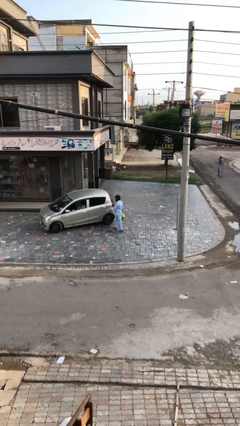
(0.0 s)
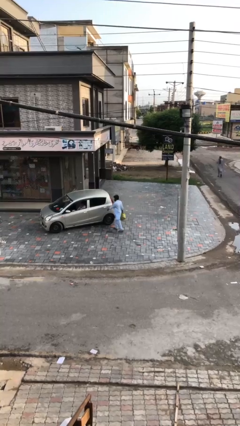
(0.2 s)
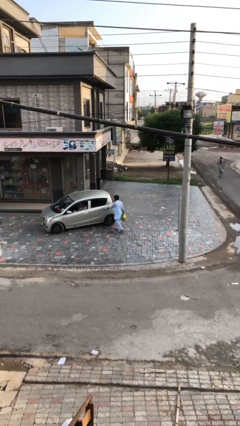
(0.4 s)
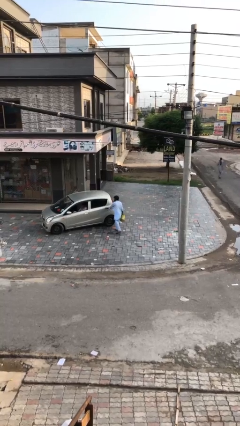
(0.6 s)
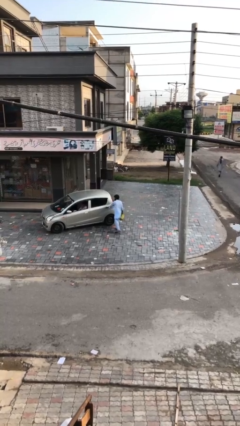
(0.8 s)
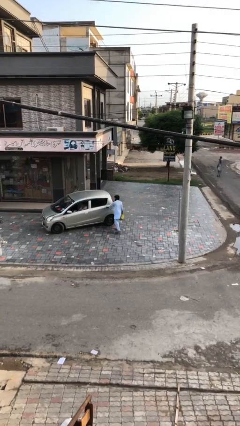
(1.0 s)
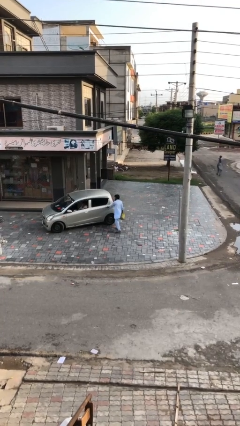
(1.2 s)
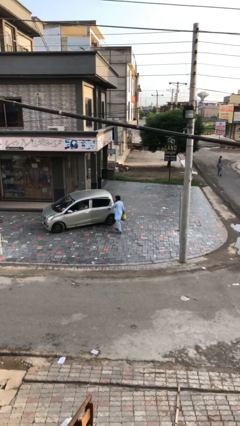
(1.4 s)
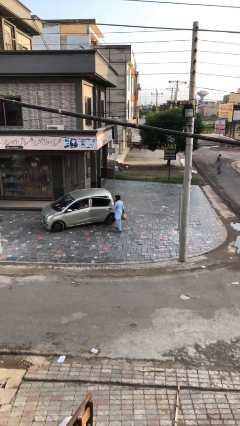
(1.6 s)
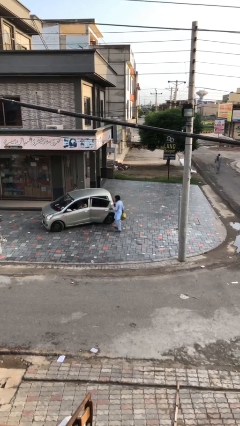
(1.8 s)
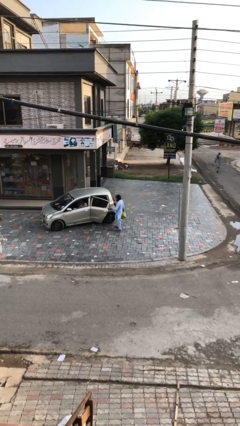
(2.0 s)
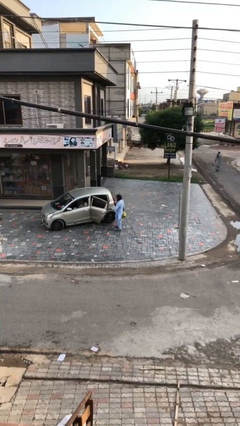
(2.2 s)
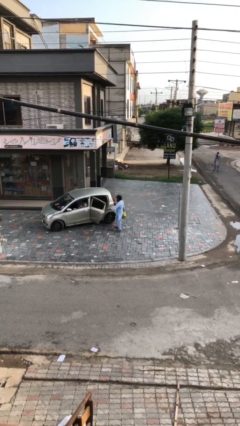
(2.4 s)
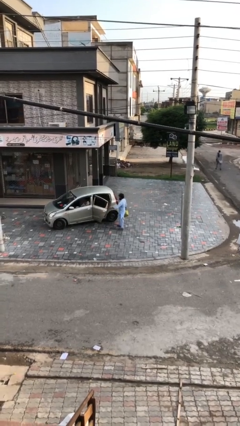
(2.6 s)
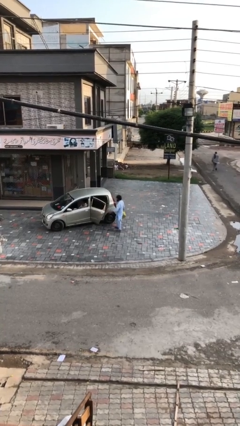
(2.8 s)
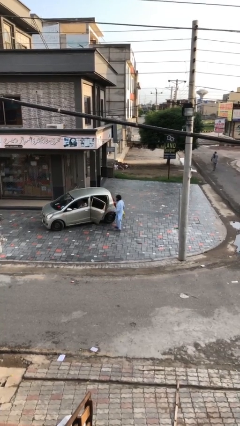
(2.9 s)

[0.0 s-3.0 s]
person opens car door

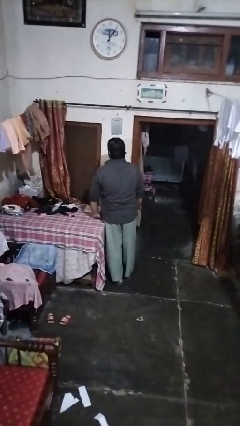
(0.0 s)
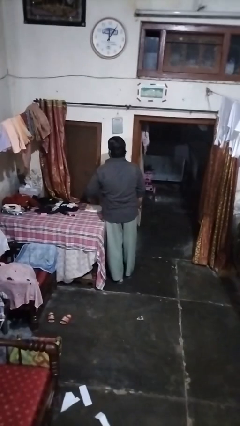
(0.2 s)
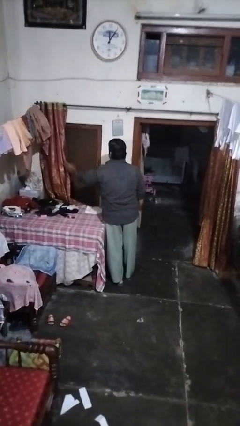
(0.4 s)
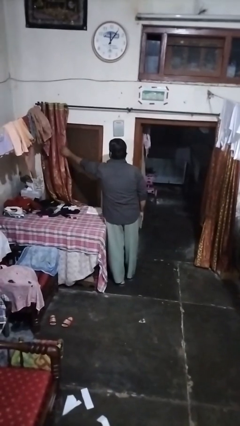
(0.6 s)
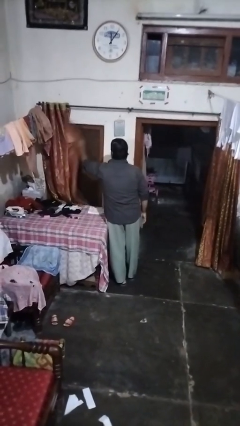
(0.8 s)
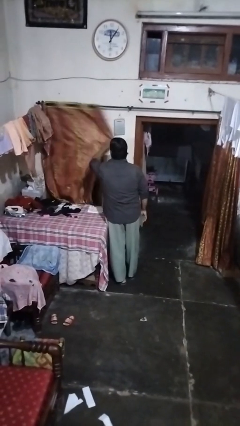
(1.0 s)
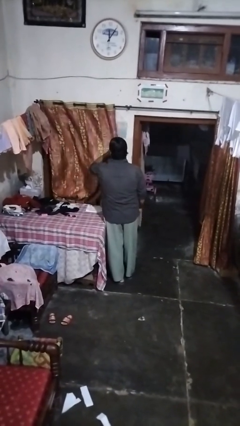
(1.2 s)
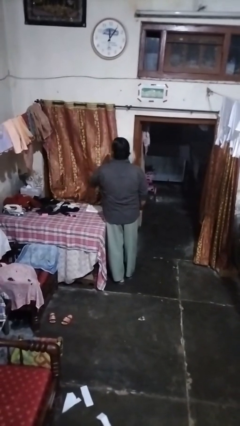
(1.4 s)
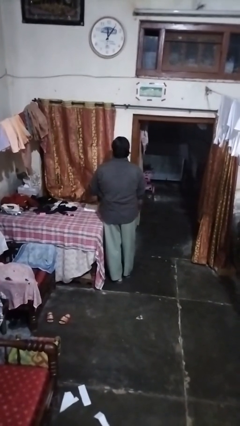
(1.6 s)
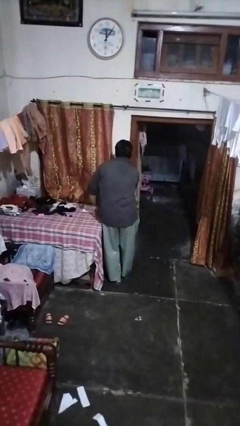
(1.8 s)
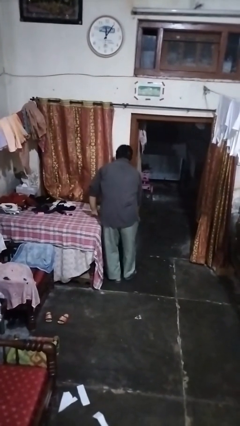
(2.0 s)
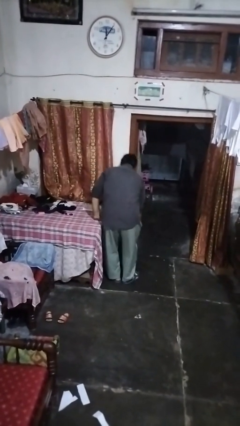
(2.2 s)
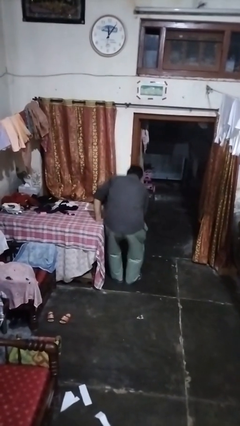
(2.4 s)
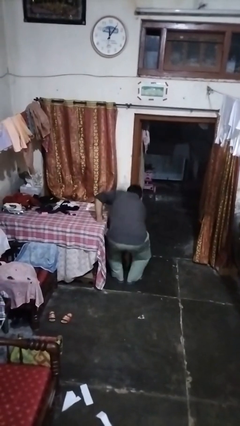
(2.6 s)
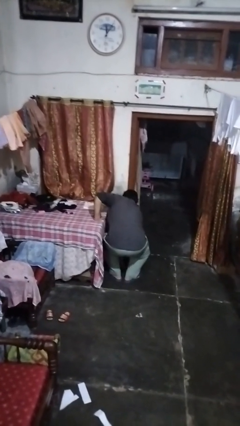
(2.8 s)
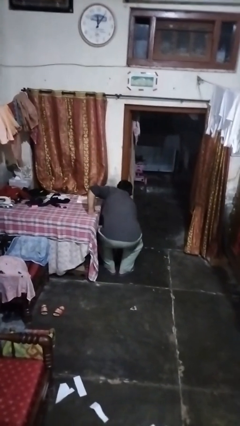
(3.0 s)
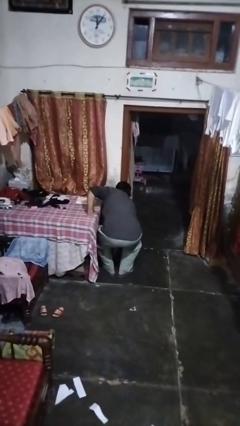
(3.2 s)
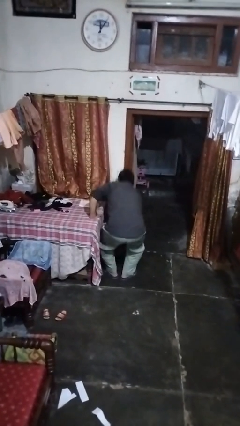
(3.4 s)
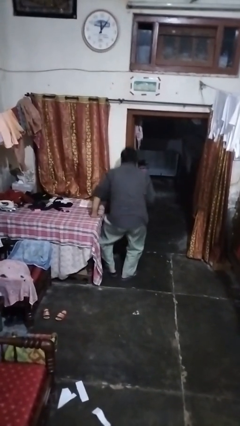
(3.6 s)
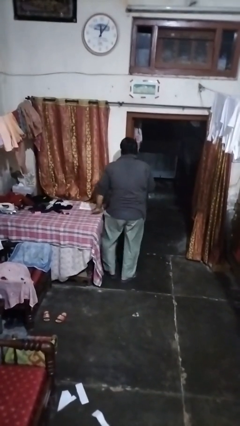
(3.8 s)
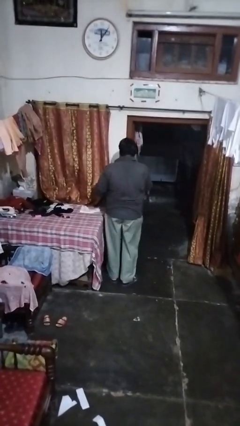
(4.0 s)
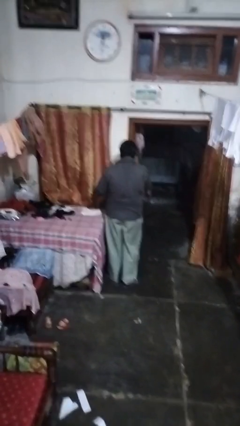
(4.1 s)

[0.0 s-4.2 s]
person closes curtains

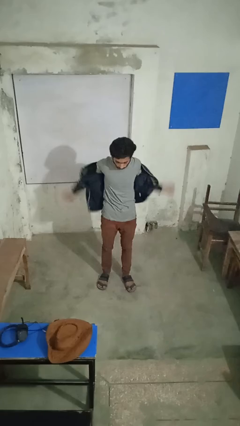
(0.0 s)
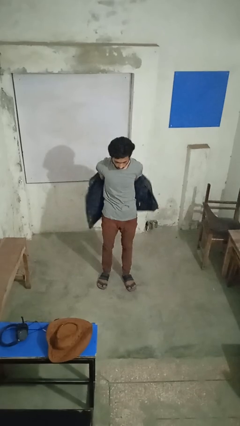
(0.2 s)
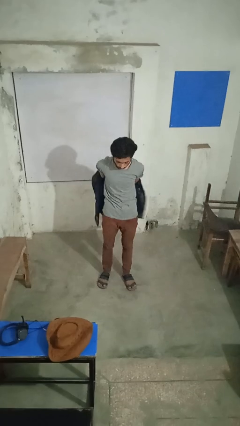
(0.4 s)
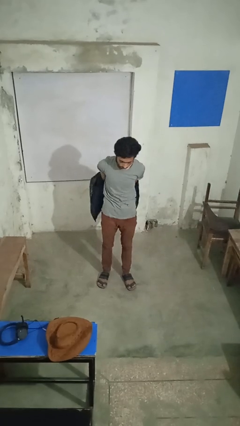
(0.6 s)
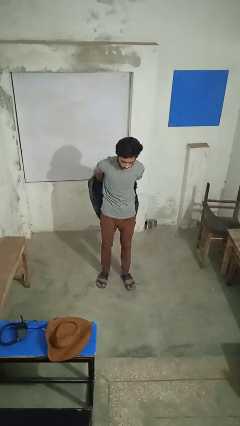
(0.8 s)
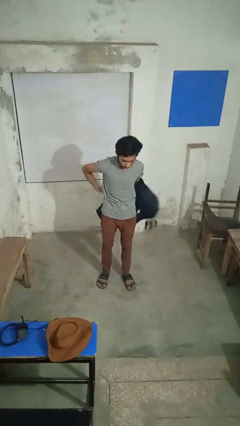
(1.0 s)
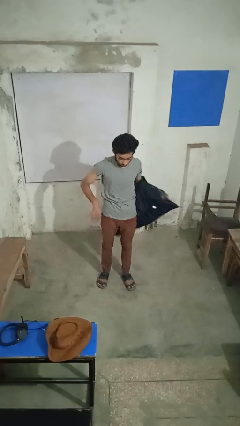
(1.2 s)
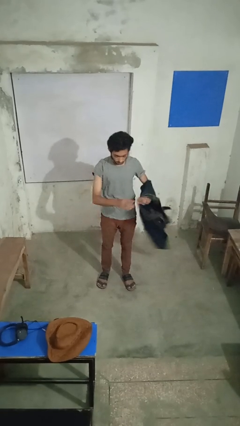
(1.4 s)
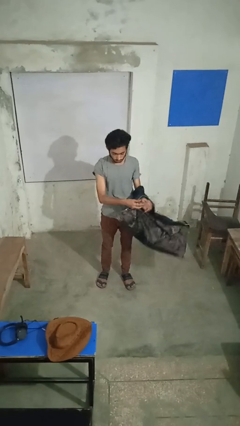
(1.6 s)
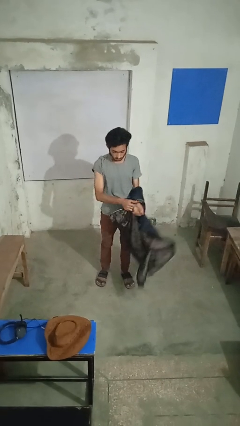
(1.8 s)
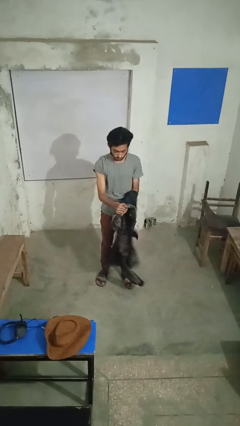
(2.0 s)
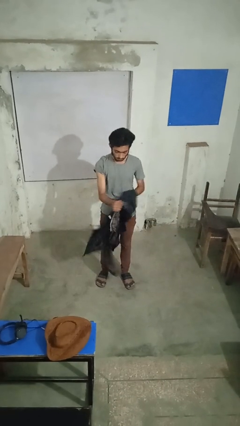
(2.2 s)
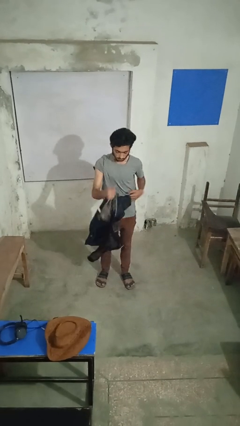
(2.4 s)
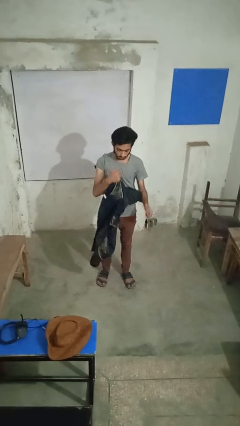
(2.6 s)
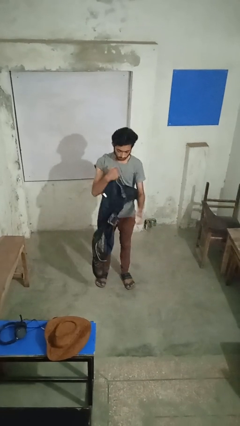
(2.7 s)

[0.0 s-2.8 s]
person takes off jacket

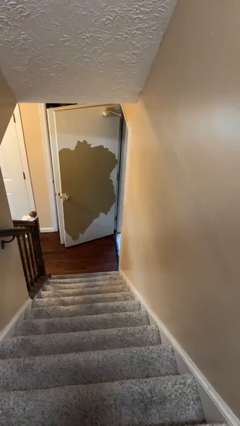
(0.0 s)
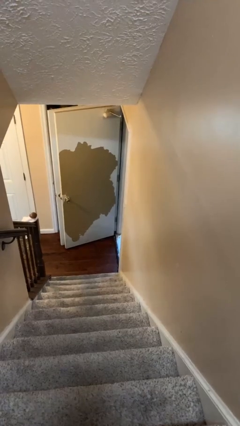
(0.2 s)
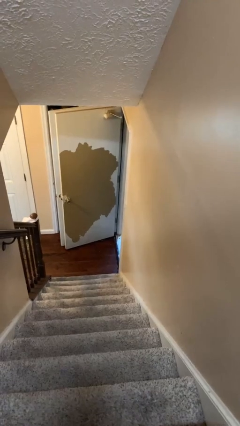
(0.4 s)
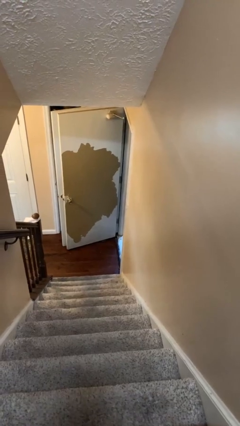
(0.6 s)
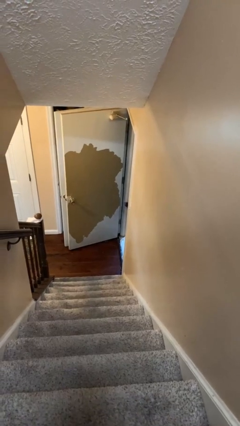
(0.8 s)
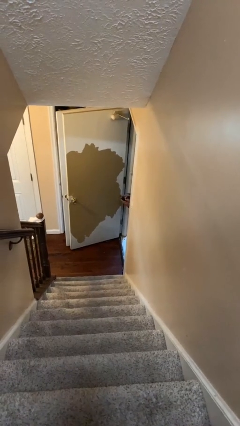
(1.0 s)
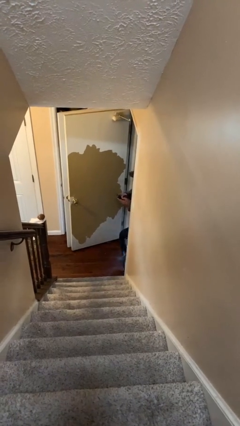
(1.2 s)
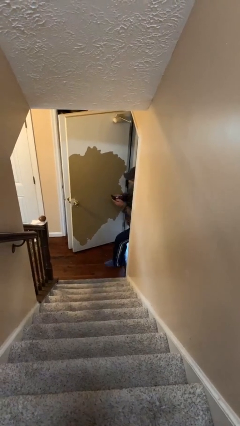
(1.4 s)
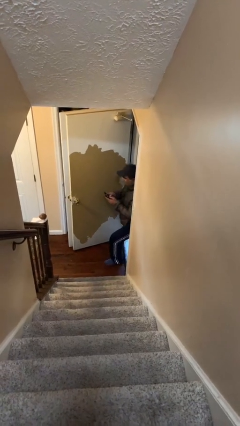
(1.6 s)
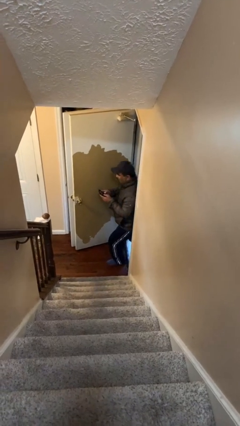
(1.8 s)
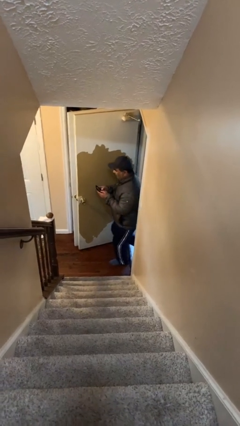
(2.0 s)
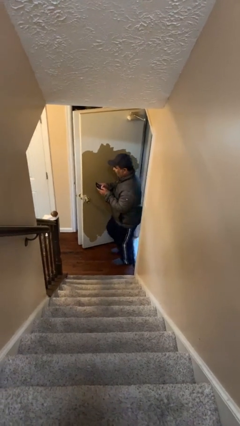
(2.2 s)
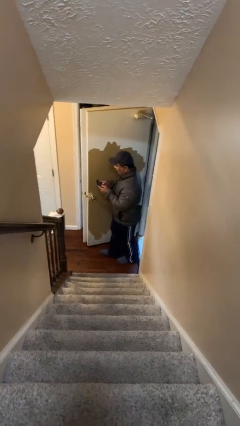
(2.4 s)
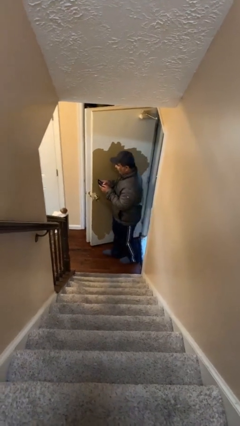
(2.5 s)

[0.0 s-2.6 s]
person enters scene through structure

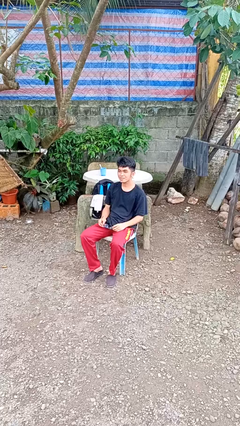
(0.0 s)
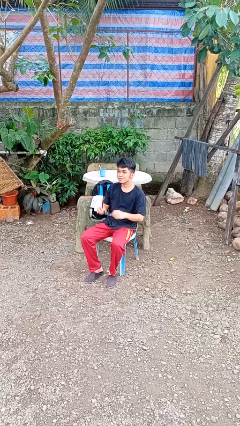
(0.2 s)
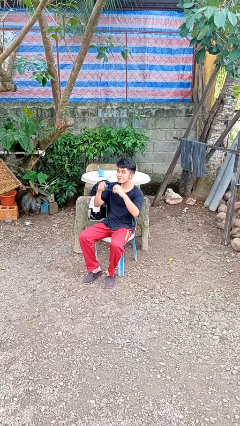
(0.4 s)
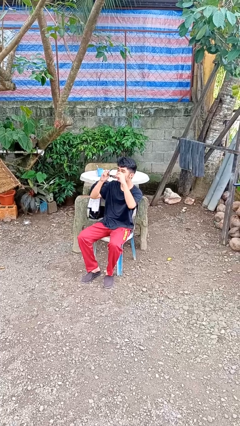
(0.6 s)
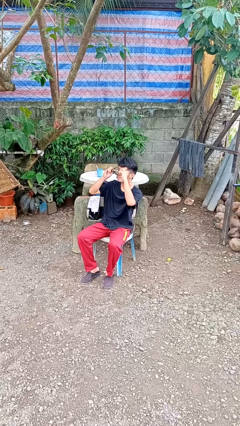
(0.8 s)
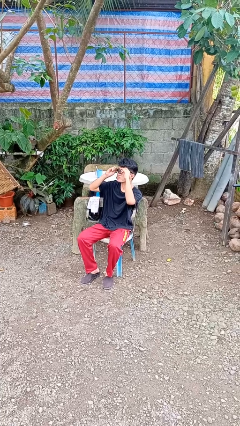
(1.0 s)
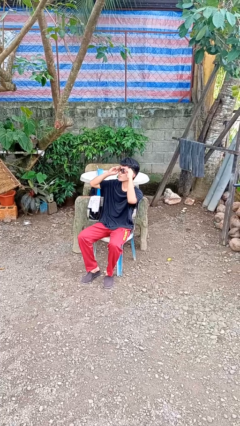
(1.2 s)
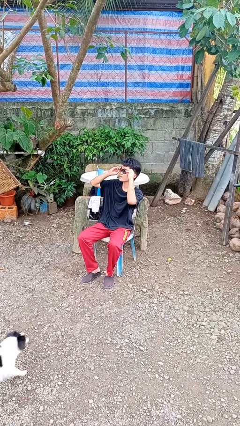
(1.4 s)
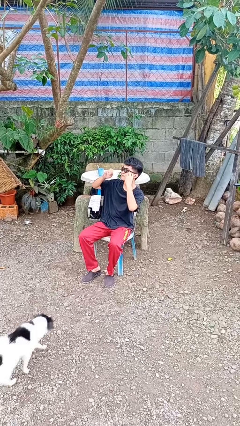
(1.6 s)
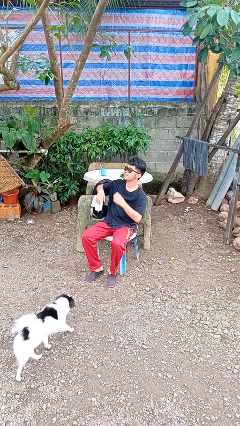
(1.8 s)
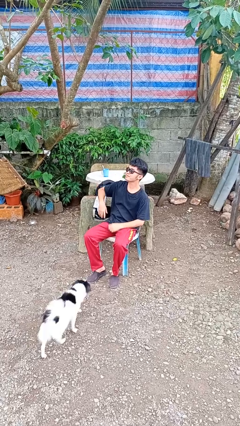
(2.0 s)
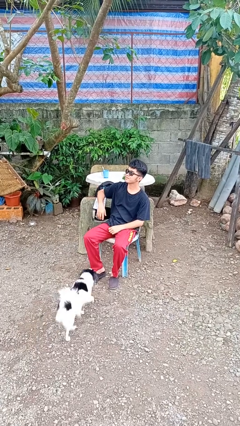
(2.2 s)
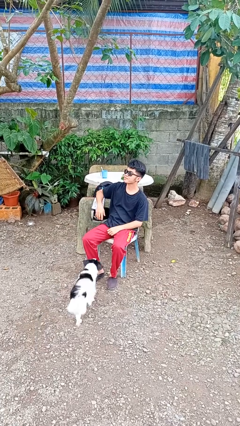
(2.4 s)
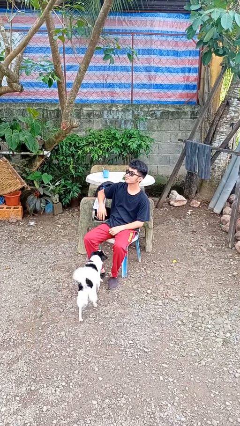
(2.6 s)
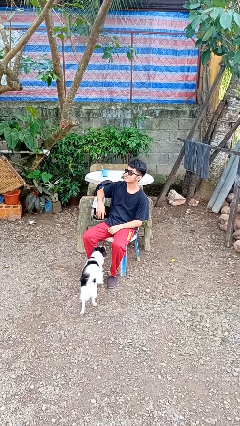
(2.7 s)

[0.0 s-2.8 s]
person puts on sunglasses

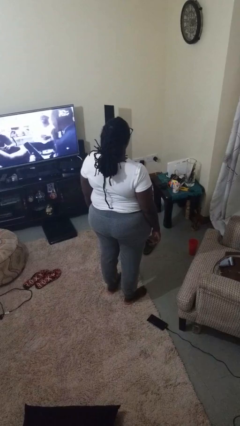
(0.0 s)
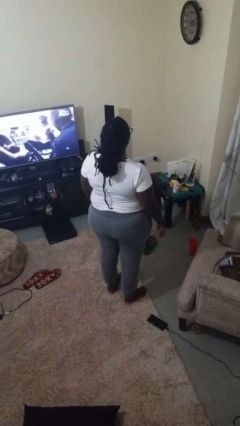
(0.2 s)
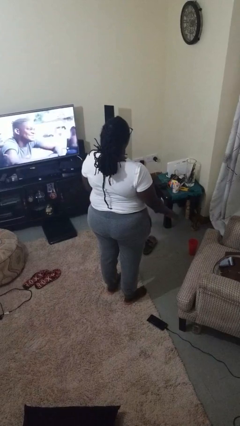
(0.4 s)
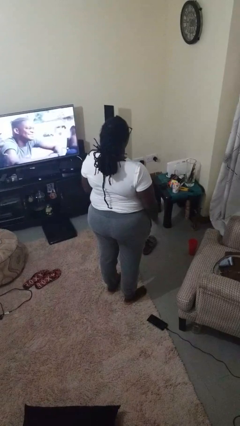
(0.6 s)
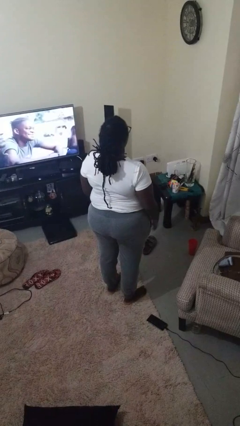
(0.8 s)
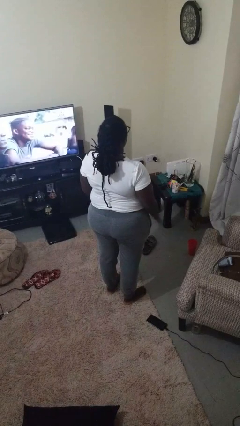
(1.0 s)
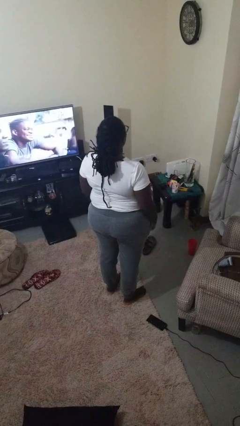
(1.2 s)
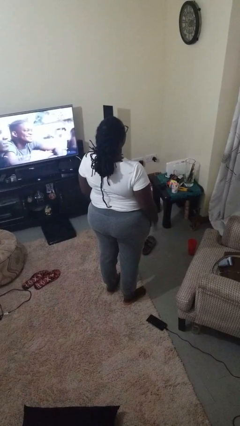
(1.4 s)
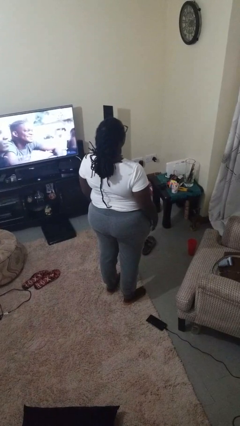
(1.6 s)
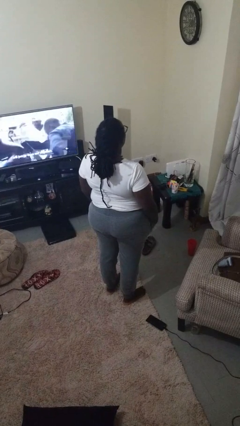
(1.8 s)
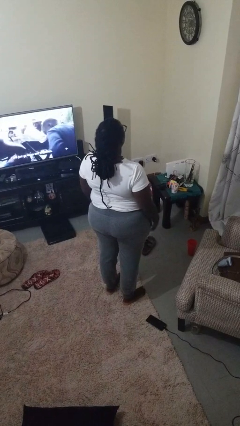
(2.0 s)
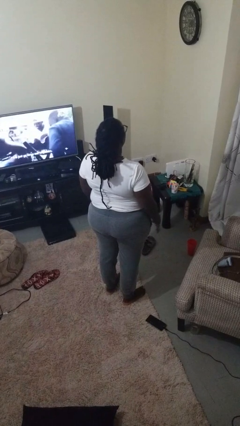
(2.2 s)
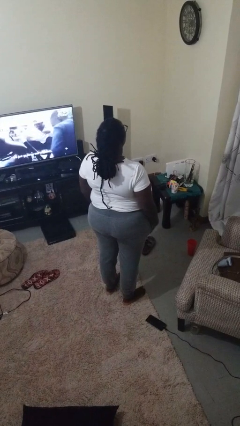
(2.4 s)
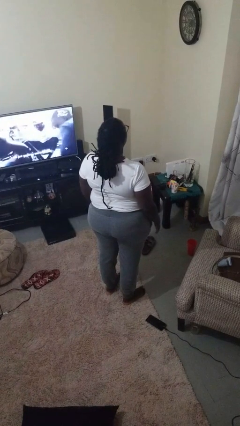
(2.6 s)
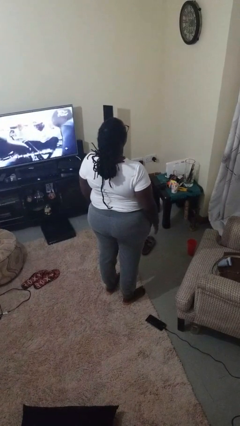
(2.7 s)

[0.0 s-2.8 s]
person slaps hands on thighs
